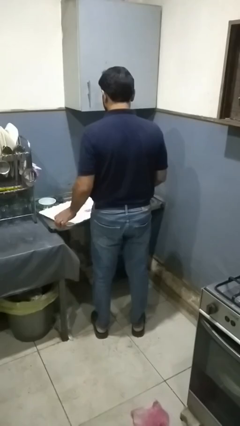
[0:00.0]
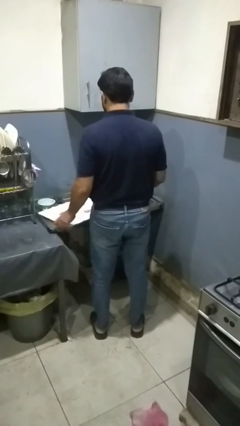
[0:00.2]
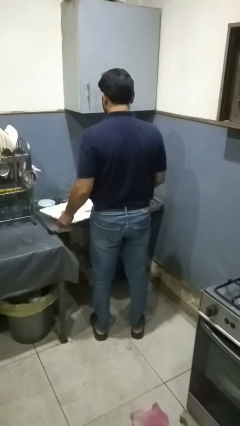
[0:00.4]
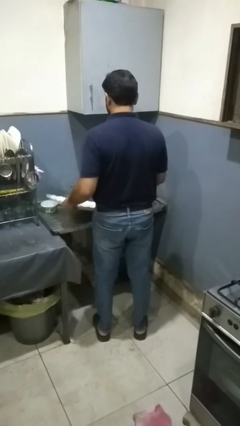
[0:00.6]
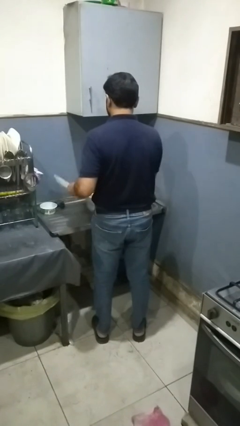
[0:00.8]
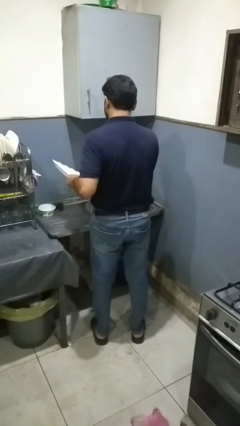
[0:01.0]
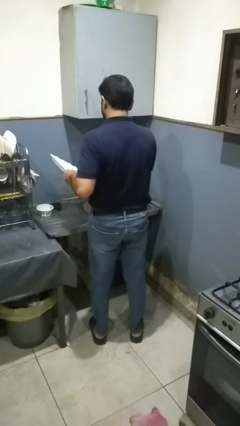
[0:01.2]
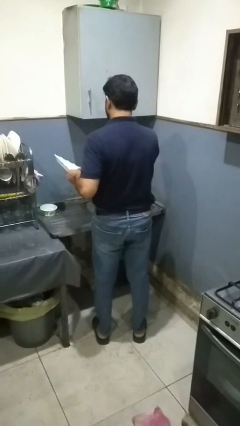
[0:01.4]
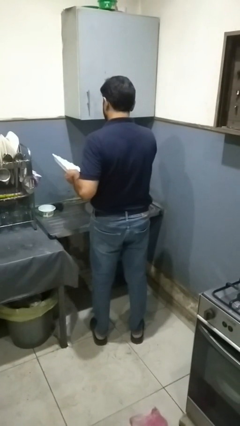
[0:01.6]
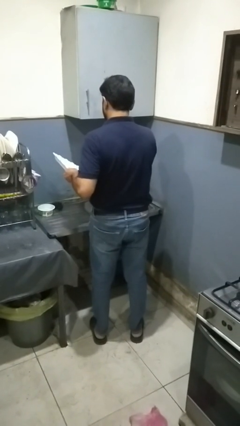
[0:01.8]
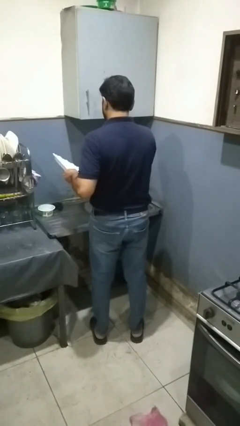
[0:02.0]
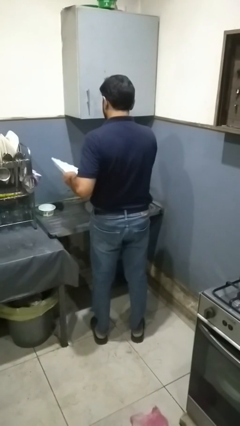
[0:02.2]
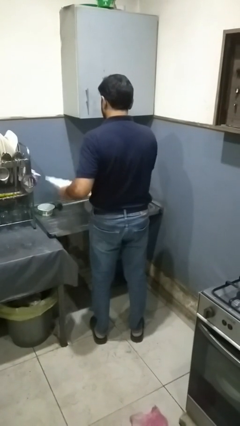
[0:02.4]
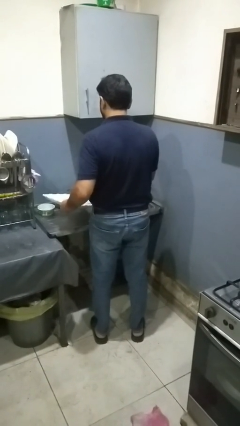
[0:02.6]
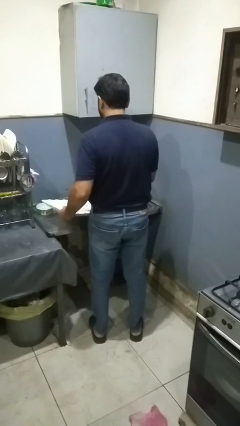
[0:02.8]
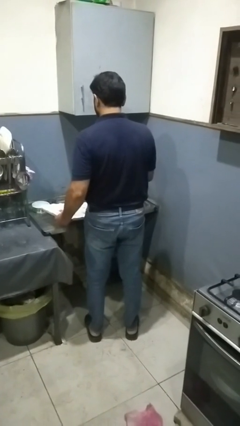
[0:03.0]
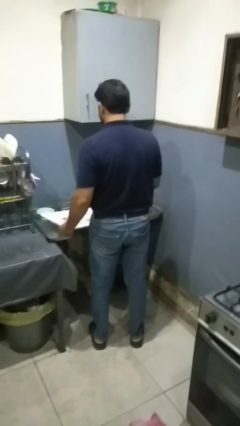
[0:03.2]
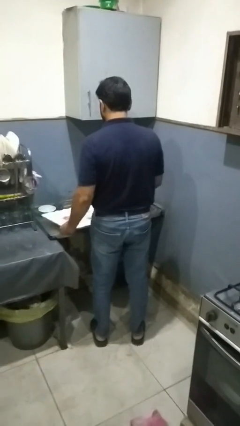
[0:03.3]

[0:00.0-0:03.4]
person washes dish

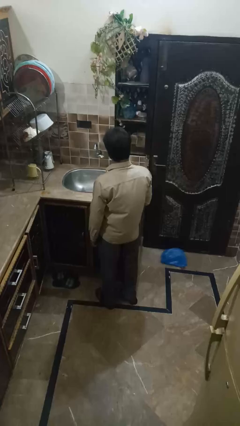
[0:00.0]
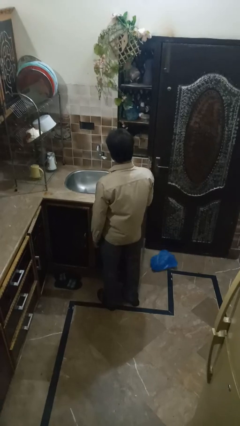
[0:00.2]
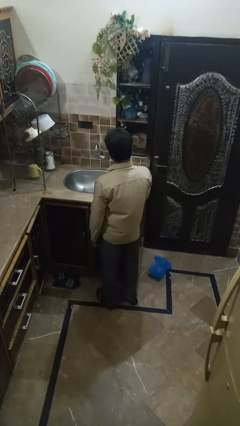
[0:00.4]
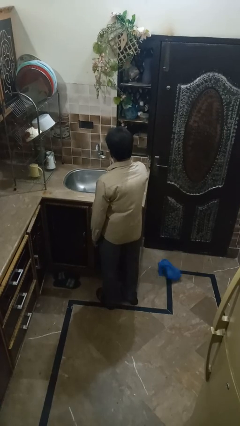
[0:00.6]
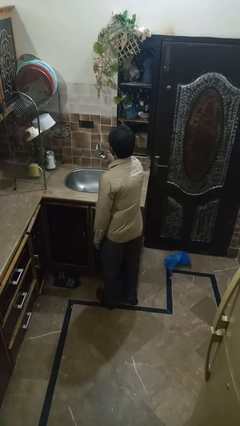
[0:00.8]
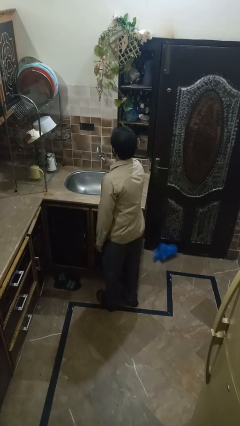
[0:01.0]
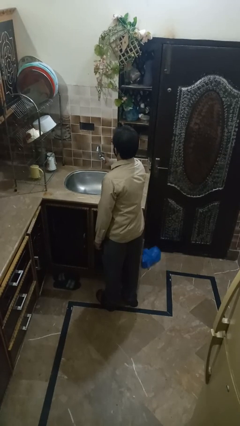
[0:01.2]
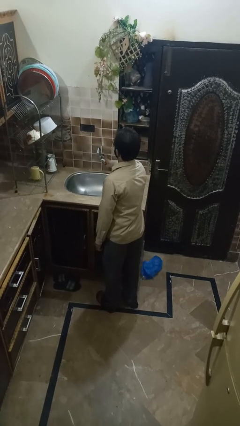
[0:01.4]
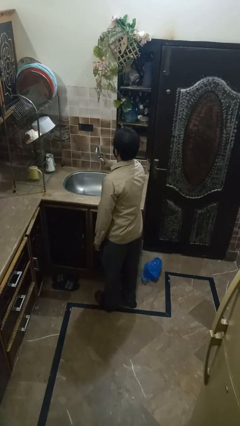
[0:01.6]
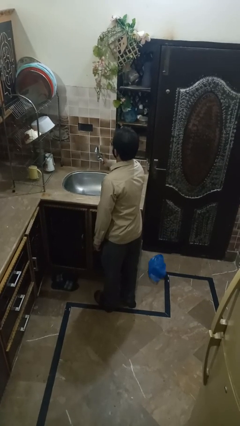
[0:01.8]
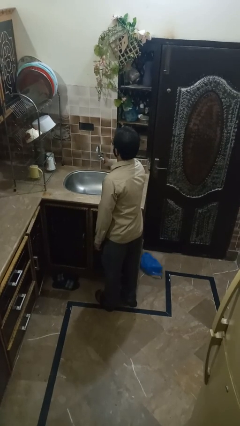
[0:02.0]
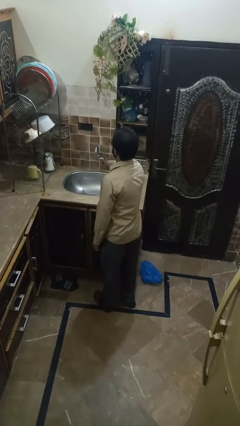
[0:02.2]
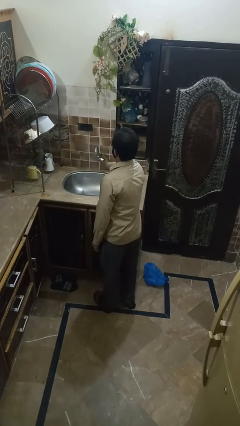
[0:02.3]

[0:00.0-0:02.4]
person opens dishwasher

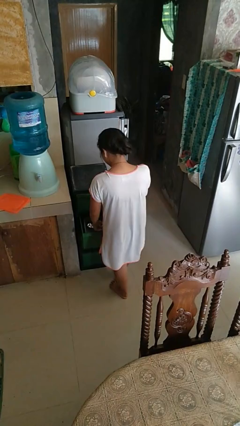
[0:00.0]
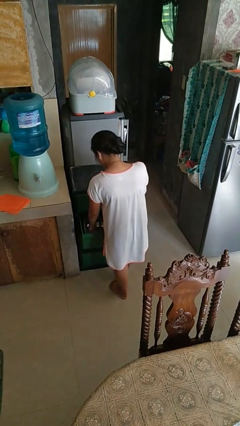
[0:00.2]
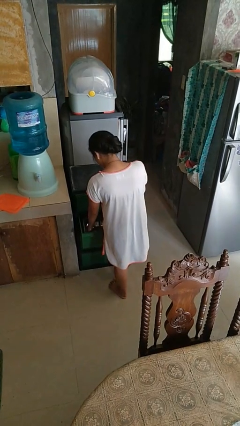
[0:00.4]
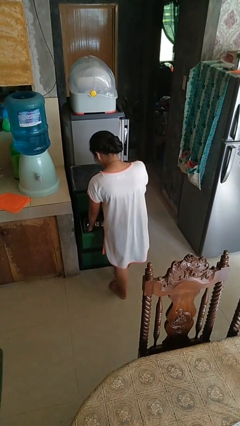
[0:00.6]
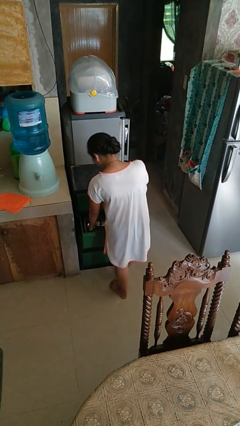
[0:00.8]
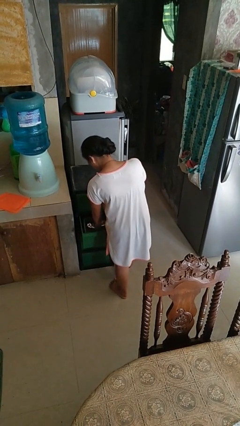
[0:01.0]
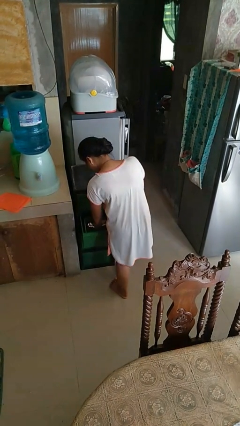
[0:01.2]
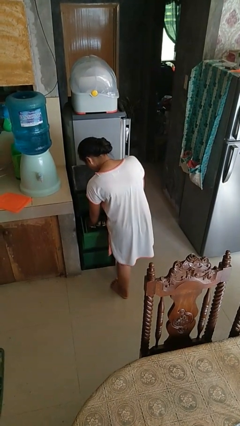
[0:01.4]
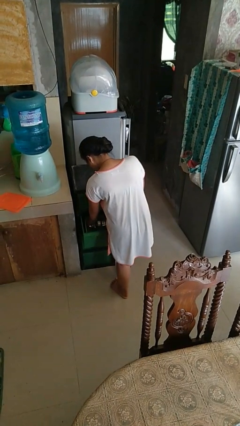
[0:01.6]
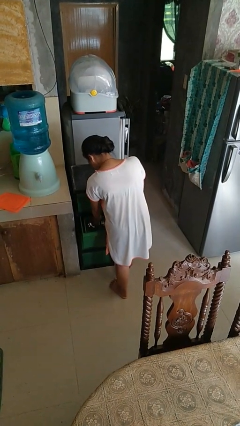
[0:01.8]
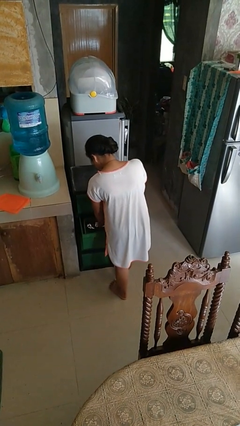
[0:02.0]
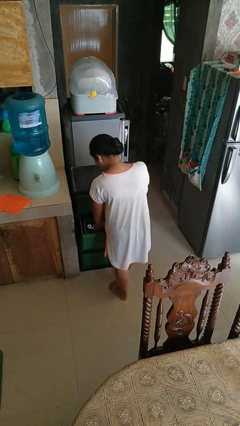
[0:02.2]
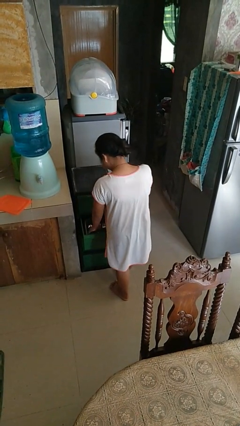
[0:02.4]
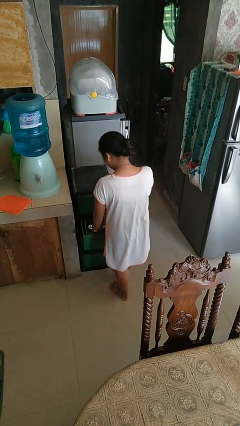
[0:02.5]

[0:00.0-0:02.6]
person searches in kitchen drawer

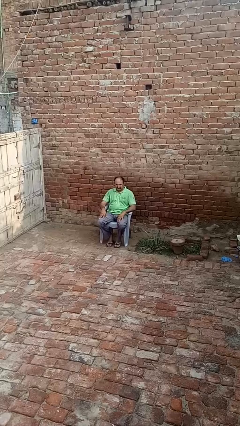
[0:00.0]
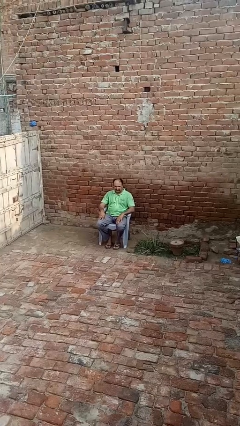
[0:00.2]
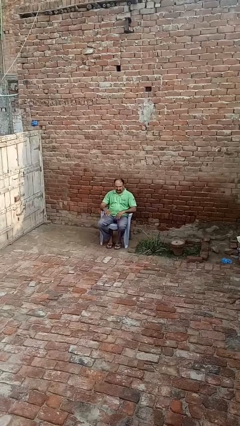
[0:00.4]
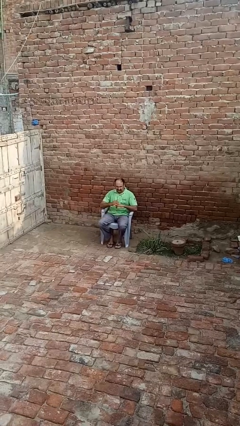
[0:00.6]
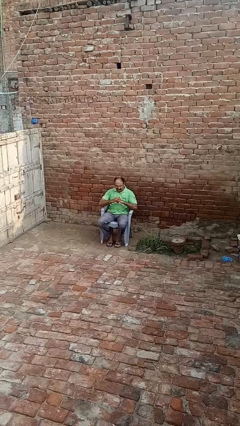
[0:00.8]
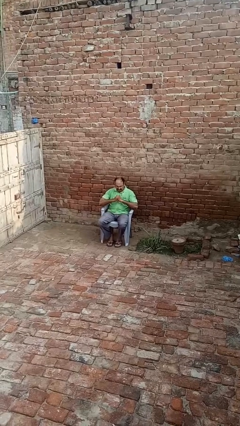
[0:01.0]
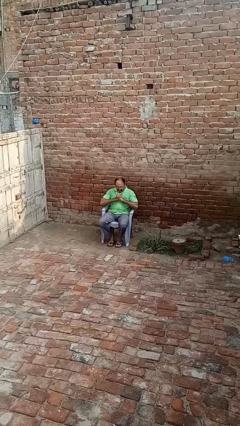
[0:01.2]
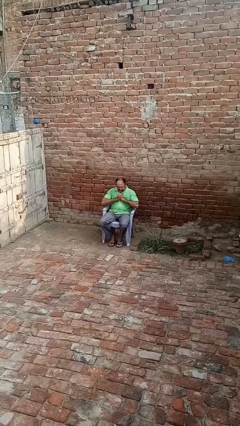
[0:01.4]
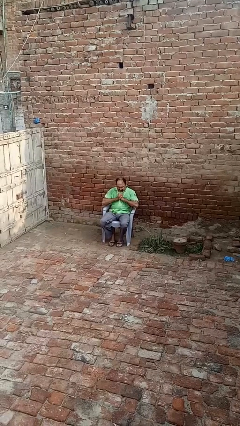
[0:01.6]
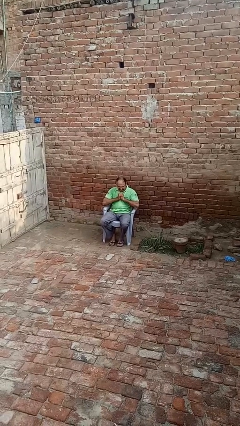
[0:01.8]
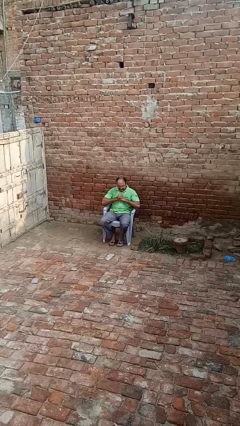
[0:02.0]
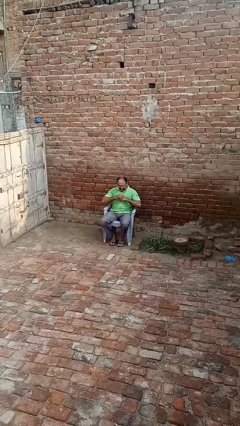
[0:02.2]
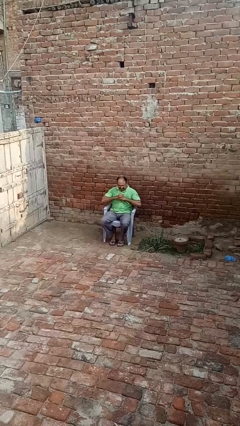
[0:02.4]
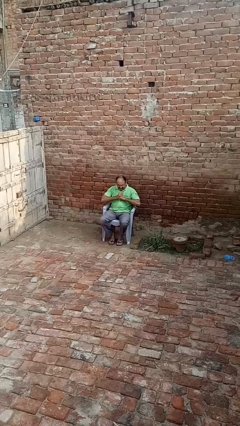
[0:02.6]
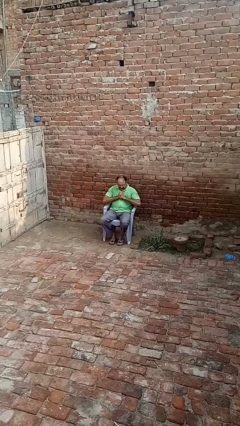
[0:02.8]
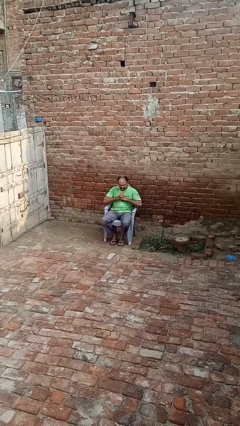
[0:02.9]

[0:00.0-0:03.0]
person cracks knuckles

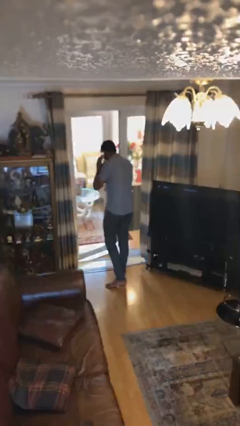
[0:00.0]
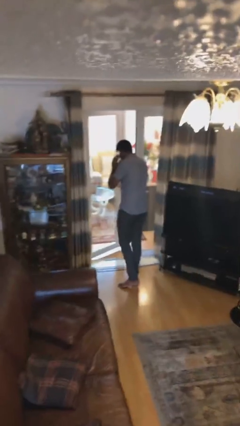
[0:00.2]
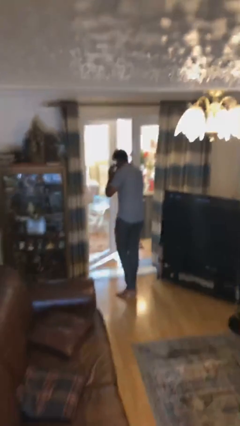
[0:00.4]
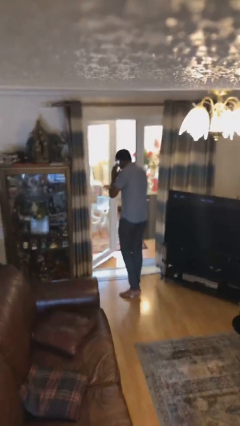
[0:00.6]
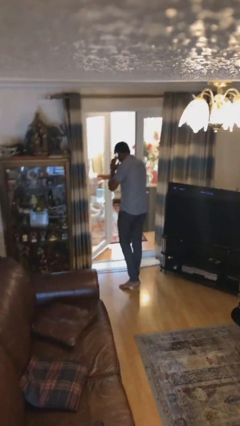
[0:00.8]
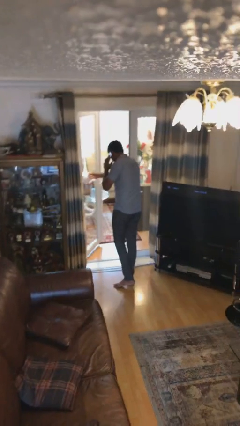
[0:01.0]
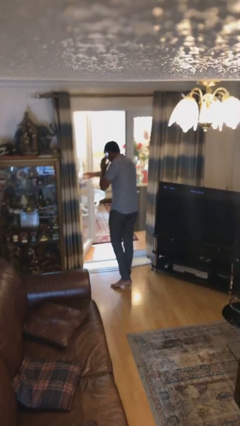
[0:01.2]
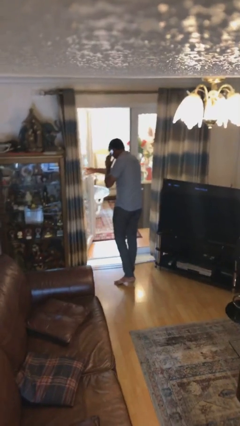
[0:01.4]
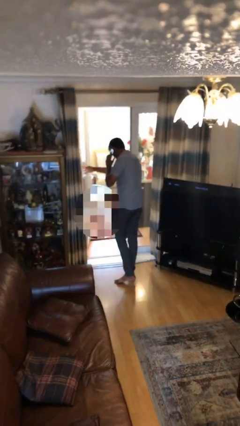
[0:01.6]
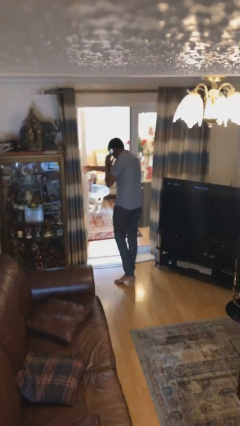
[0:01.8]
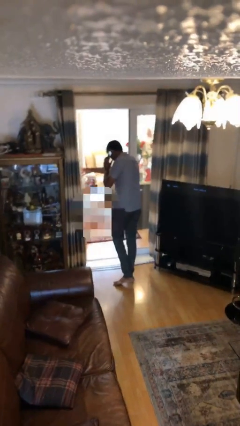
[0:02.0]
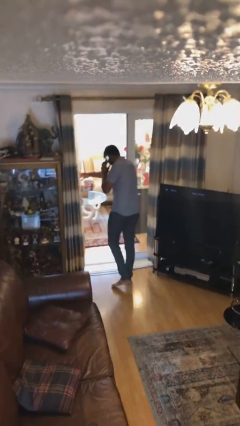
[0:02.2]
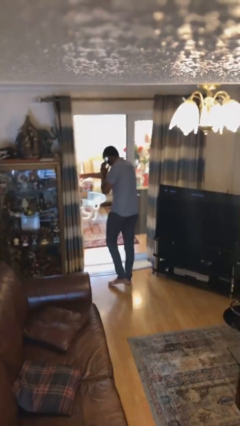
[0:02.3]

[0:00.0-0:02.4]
person opens facility door

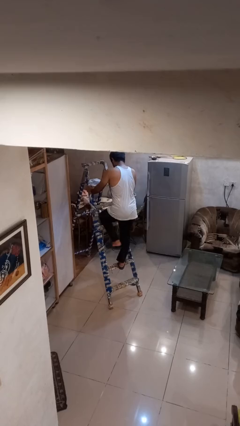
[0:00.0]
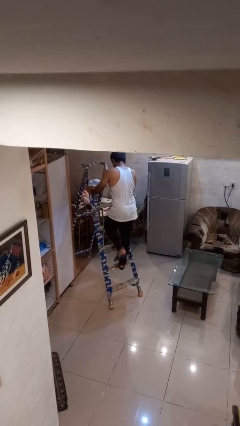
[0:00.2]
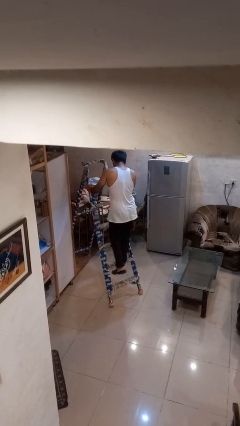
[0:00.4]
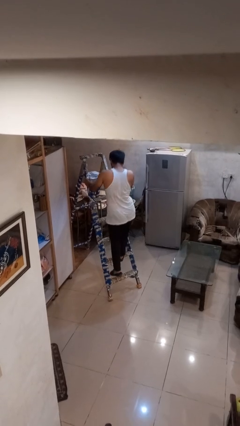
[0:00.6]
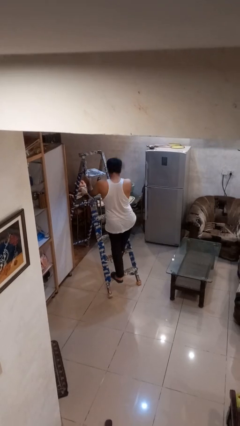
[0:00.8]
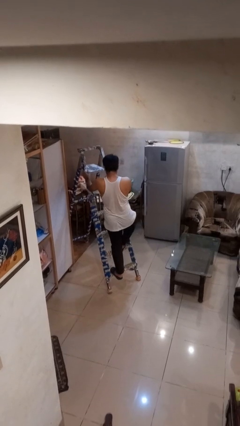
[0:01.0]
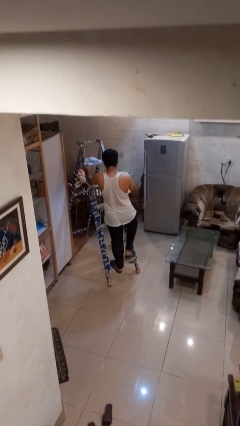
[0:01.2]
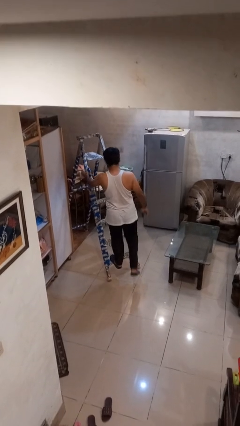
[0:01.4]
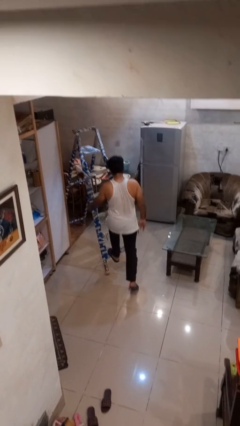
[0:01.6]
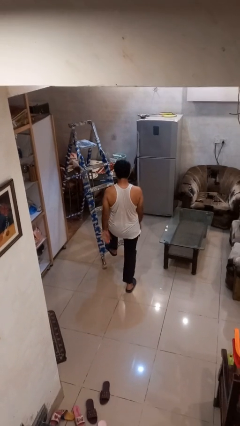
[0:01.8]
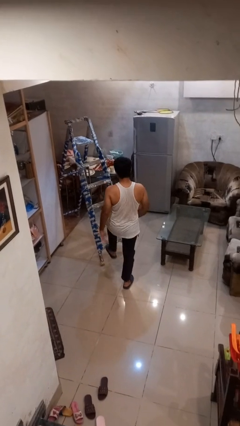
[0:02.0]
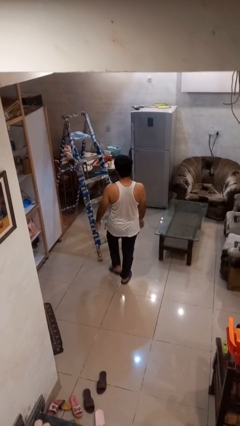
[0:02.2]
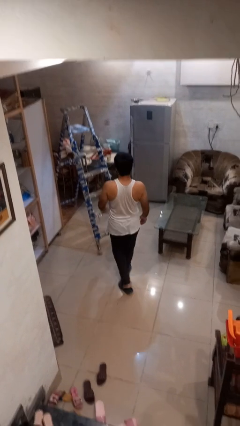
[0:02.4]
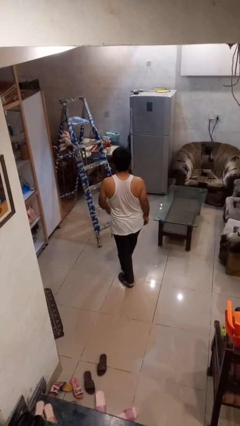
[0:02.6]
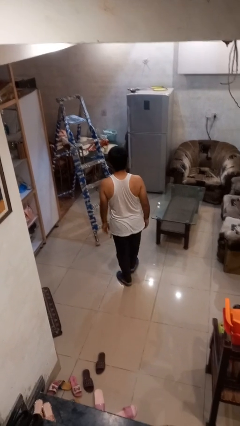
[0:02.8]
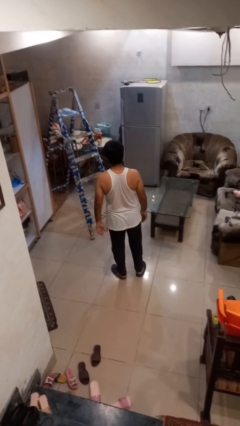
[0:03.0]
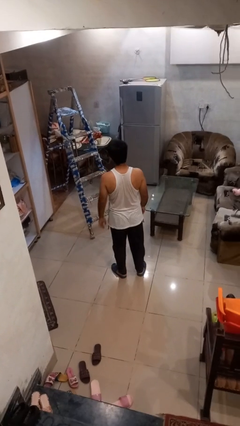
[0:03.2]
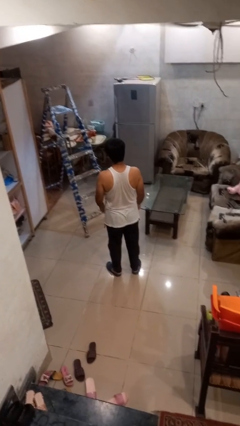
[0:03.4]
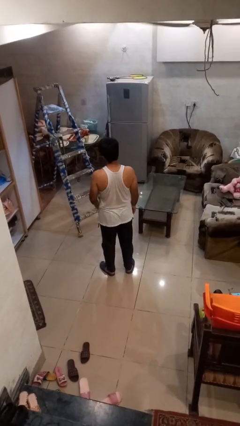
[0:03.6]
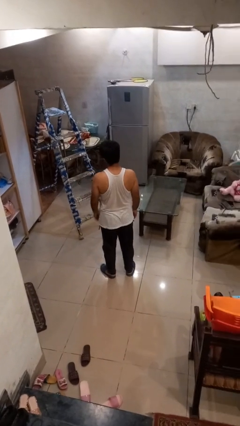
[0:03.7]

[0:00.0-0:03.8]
person climbs down ladder
